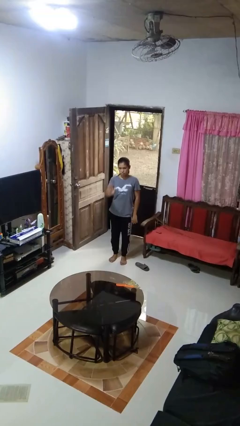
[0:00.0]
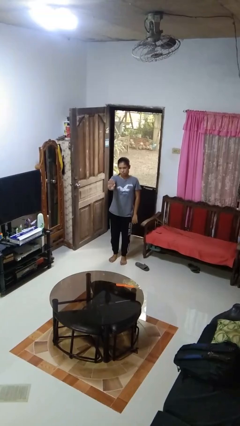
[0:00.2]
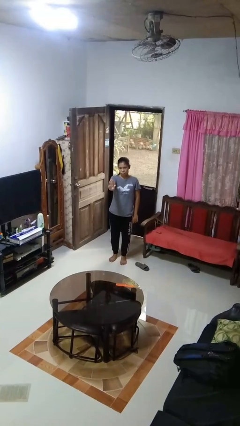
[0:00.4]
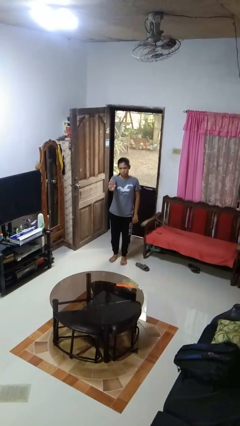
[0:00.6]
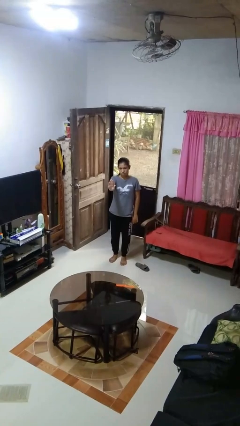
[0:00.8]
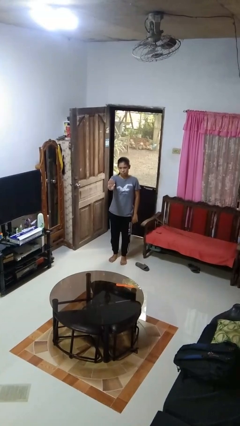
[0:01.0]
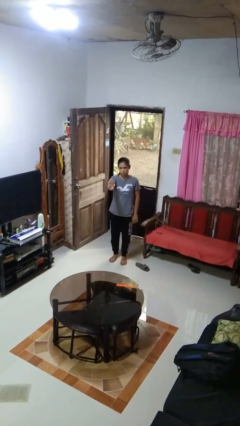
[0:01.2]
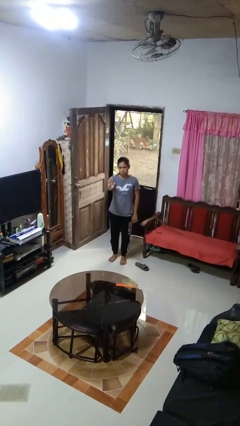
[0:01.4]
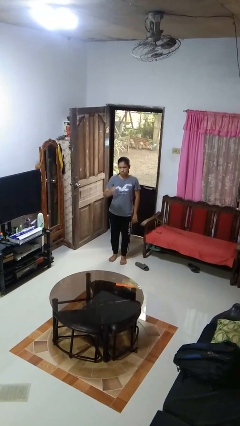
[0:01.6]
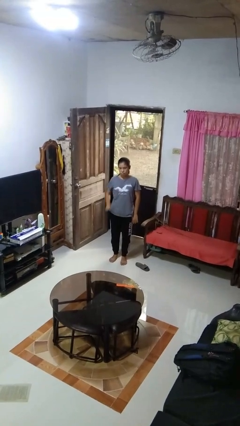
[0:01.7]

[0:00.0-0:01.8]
person gestures stop

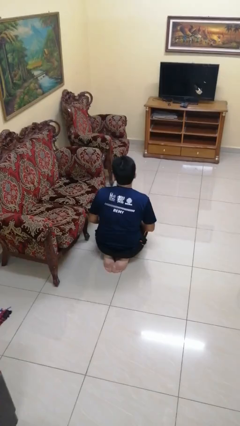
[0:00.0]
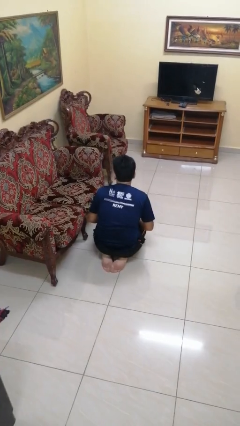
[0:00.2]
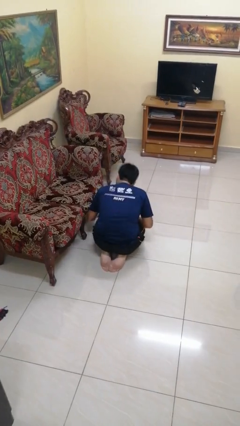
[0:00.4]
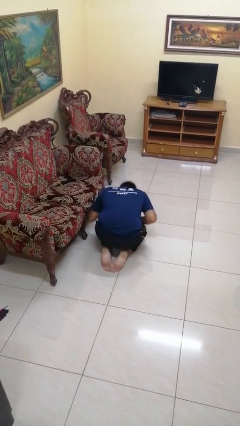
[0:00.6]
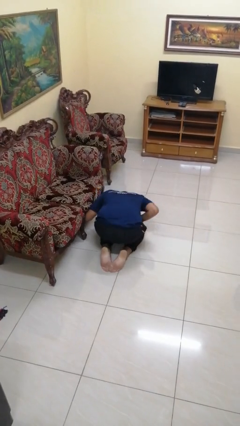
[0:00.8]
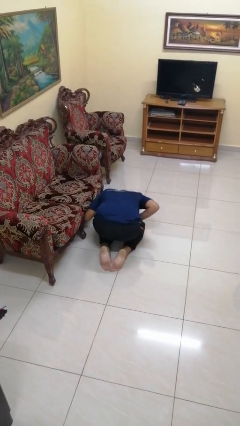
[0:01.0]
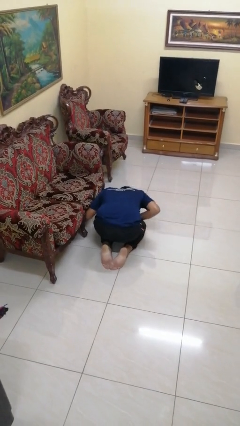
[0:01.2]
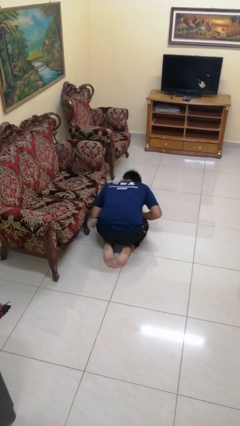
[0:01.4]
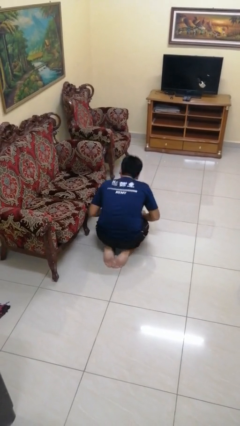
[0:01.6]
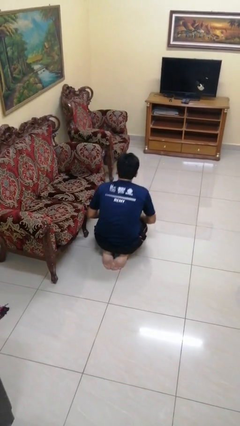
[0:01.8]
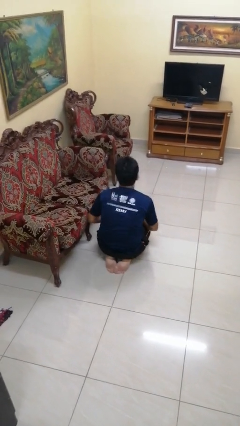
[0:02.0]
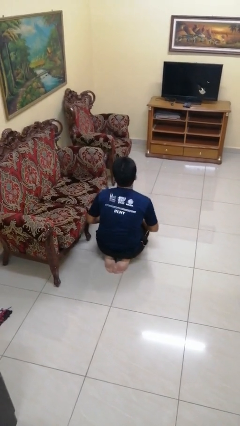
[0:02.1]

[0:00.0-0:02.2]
person searches under couch

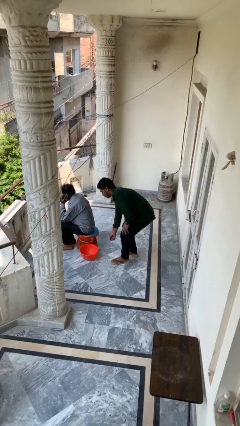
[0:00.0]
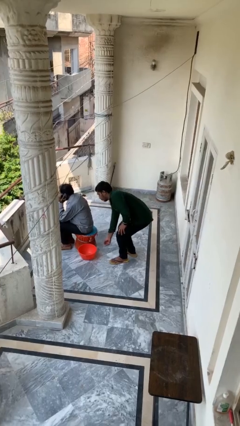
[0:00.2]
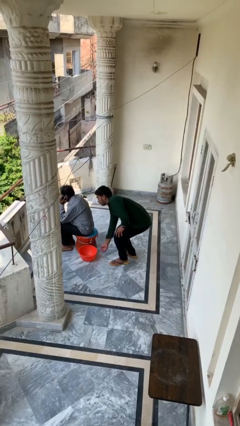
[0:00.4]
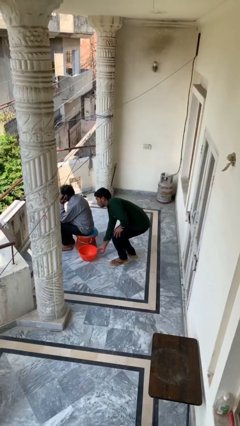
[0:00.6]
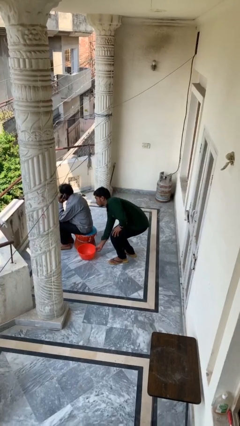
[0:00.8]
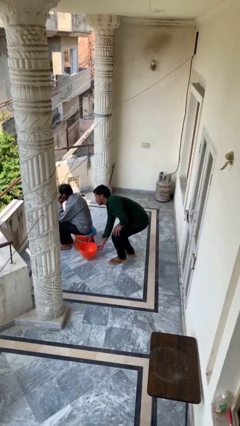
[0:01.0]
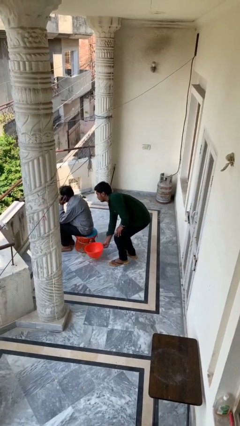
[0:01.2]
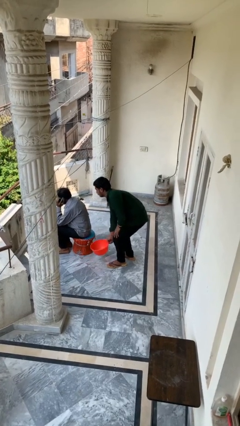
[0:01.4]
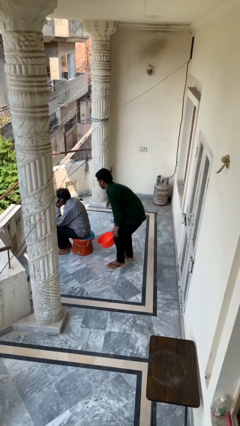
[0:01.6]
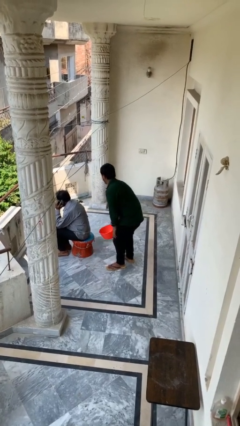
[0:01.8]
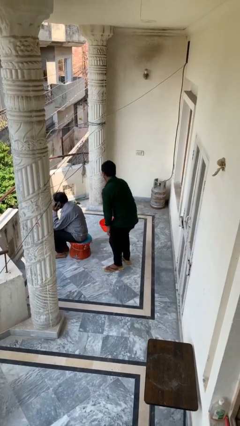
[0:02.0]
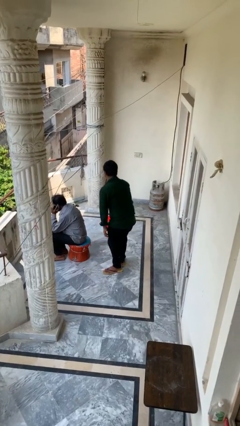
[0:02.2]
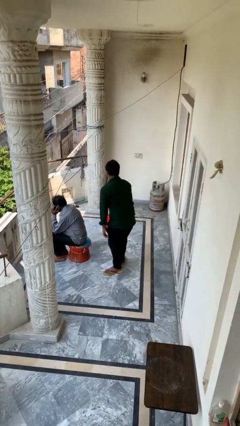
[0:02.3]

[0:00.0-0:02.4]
person steals object from person

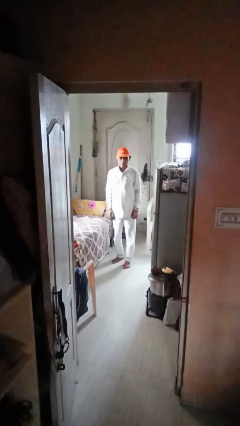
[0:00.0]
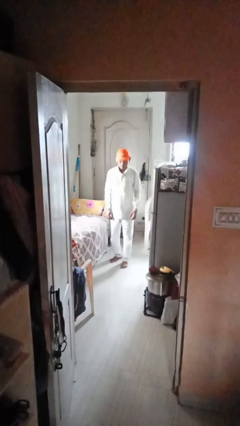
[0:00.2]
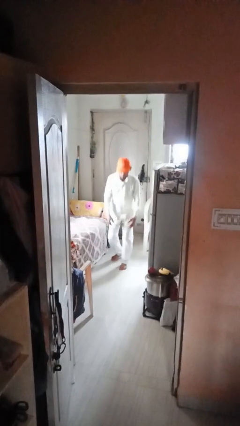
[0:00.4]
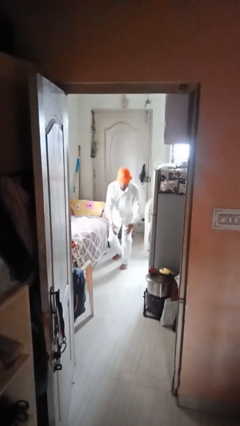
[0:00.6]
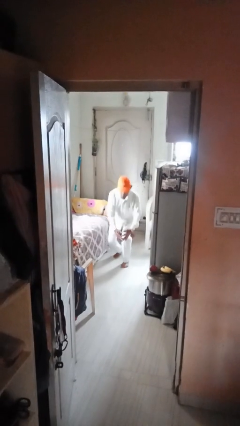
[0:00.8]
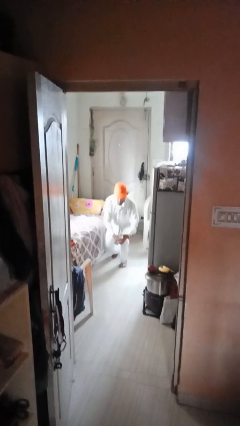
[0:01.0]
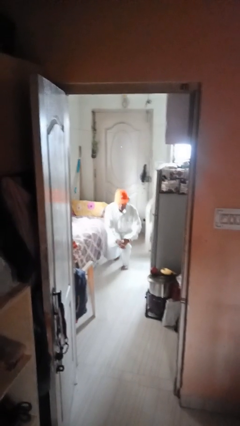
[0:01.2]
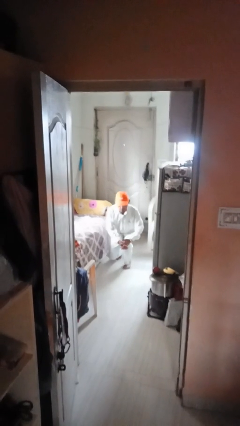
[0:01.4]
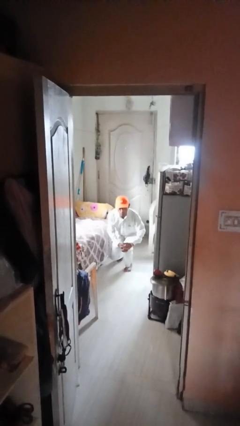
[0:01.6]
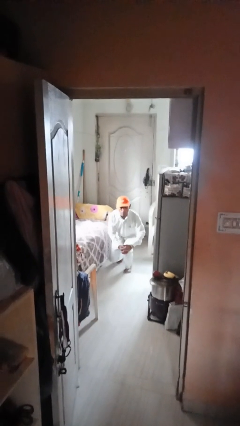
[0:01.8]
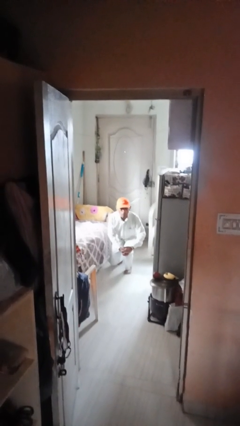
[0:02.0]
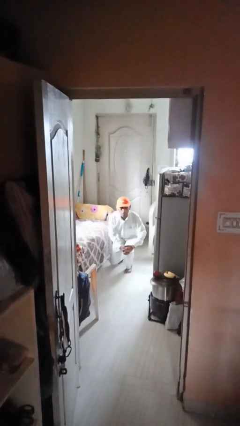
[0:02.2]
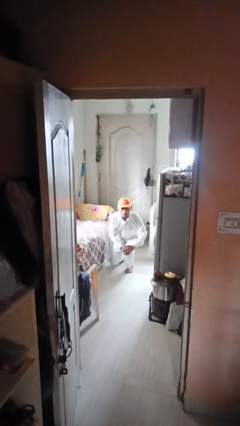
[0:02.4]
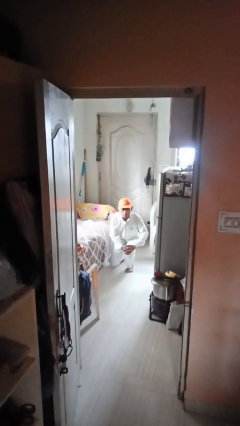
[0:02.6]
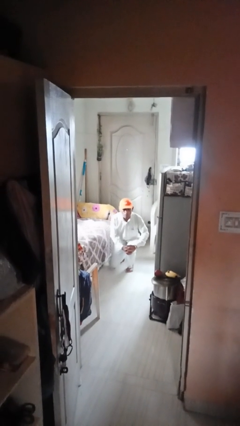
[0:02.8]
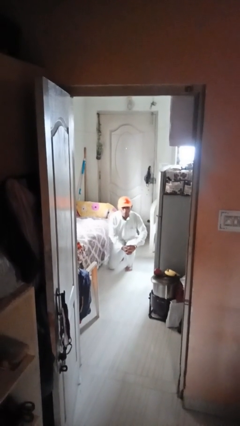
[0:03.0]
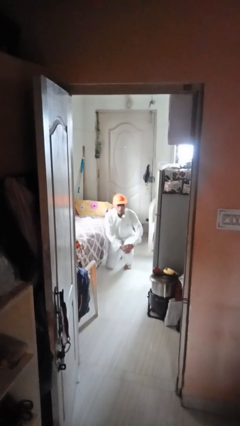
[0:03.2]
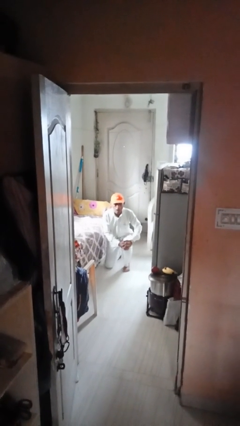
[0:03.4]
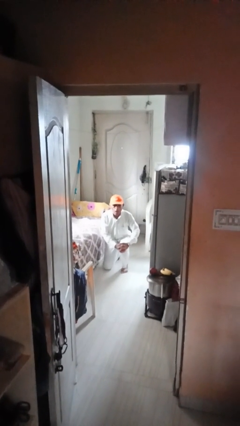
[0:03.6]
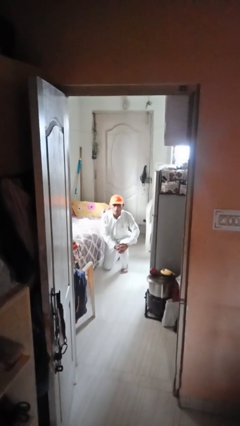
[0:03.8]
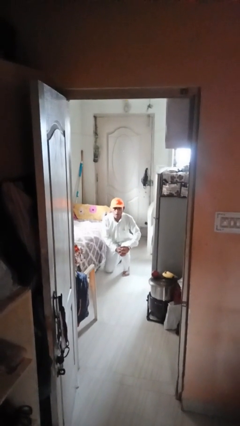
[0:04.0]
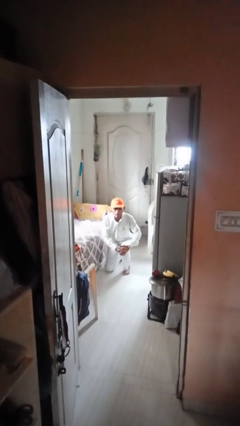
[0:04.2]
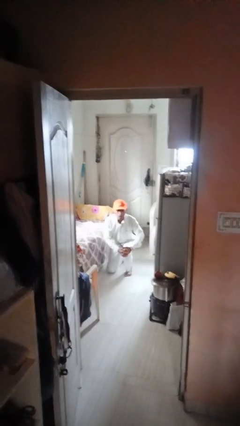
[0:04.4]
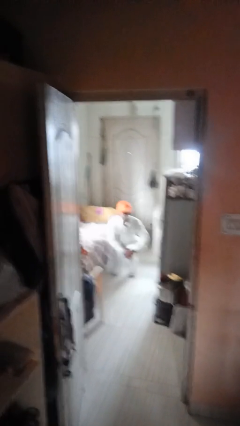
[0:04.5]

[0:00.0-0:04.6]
person exercises with lunges

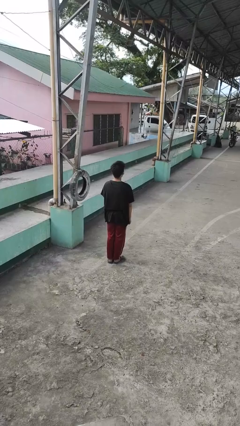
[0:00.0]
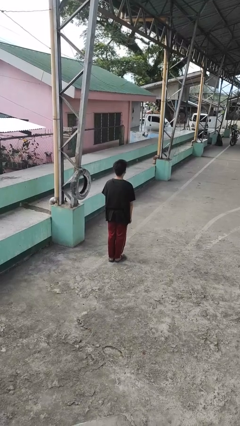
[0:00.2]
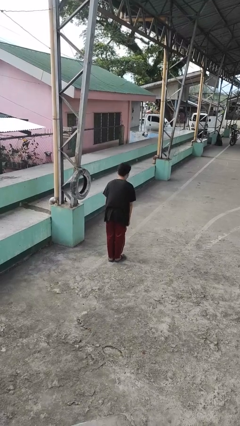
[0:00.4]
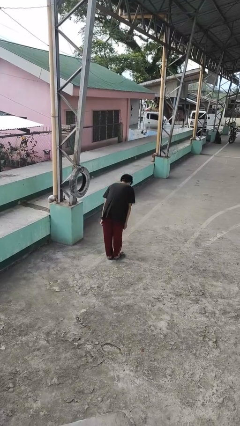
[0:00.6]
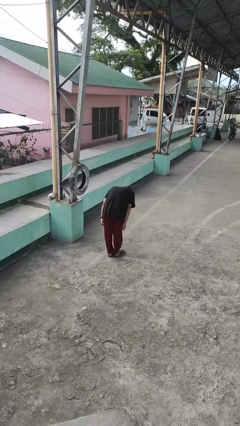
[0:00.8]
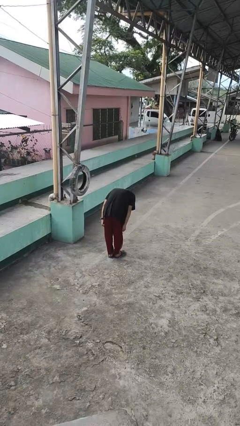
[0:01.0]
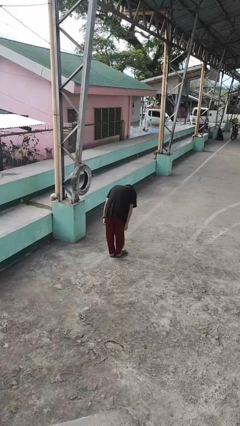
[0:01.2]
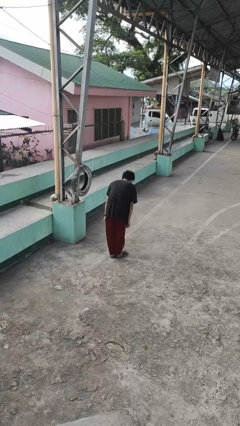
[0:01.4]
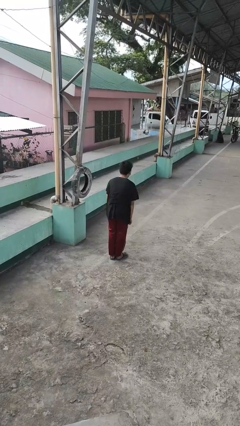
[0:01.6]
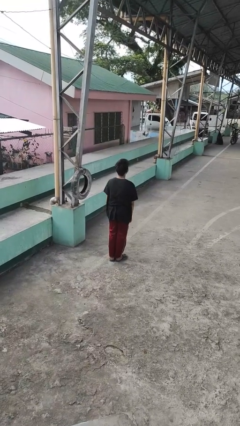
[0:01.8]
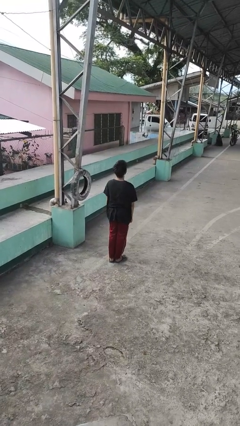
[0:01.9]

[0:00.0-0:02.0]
person bows

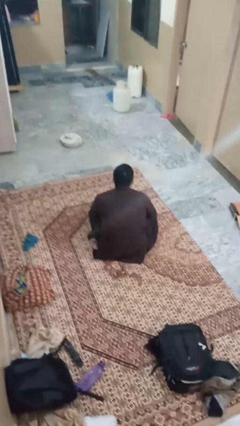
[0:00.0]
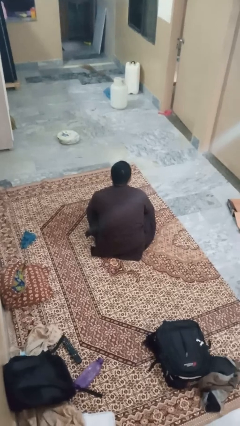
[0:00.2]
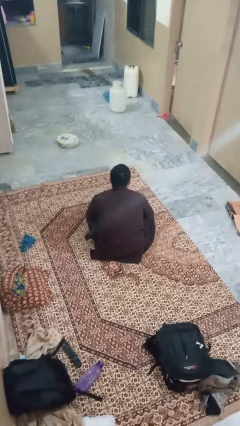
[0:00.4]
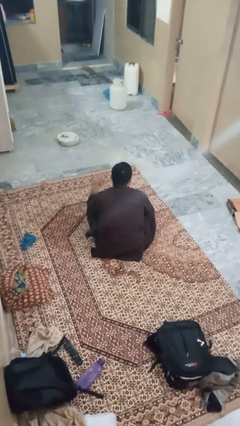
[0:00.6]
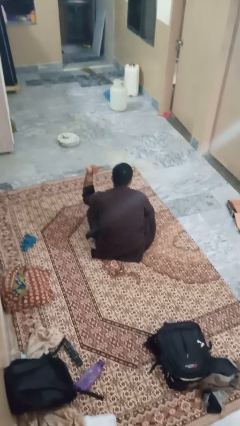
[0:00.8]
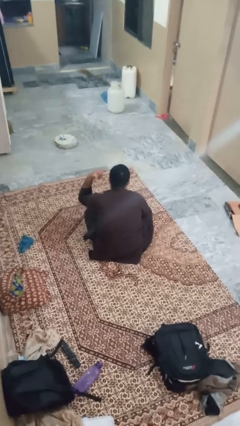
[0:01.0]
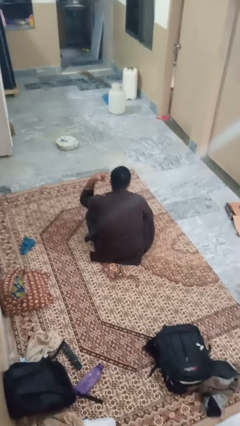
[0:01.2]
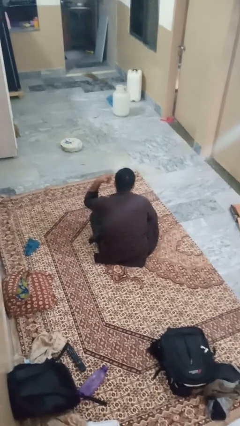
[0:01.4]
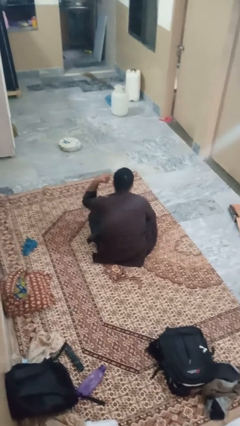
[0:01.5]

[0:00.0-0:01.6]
person gestures call me

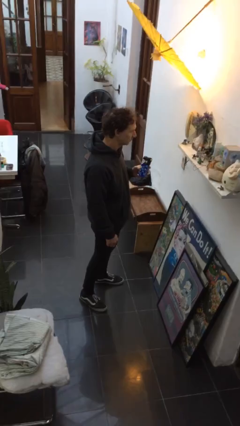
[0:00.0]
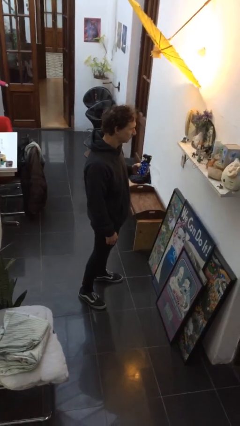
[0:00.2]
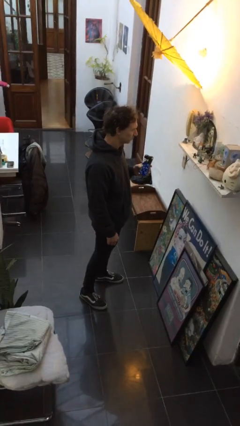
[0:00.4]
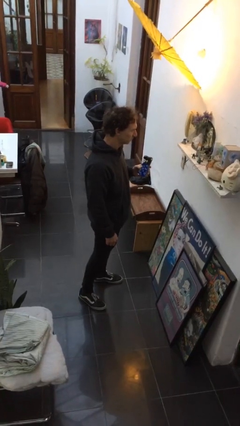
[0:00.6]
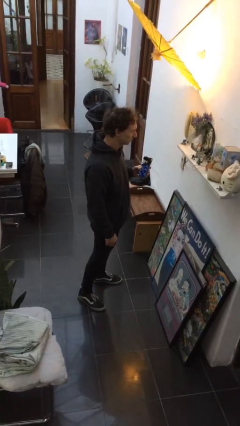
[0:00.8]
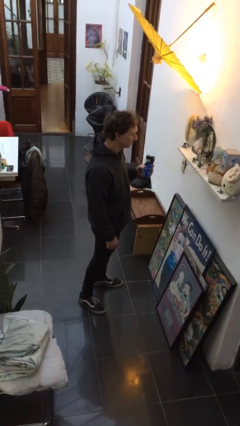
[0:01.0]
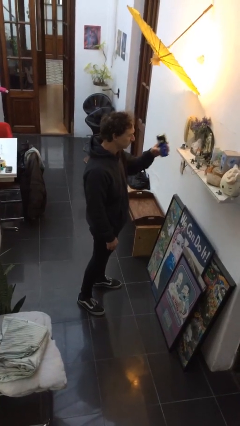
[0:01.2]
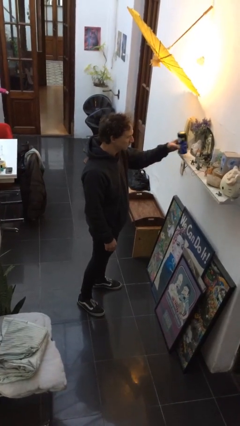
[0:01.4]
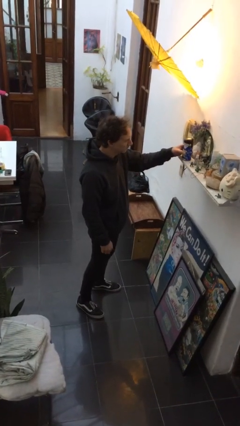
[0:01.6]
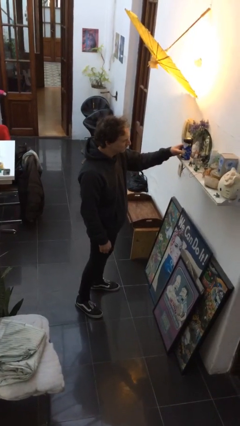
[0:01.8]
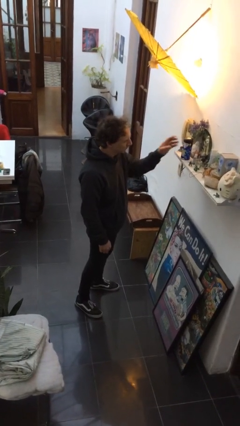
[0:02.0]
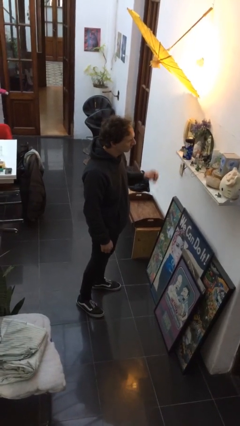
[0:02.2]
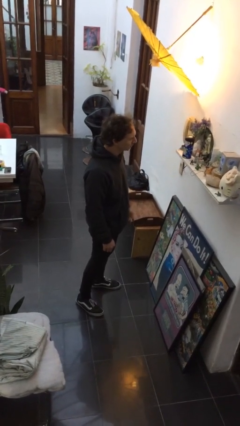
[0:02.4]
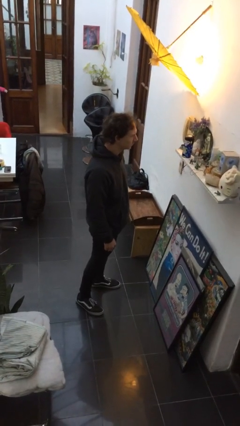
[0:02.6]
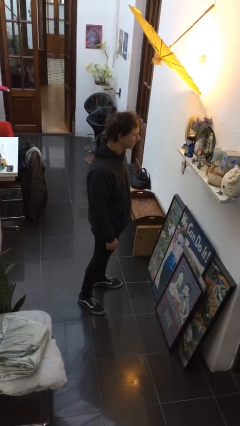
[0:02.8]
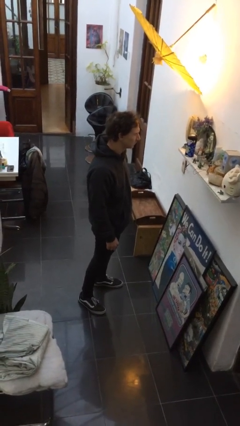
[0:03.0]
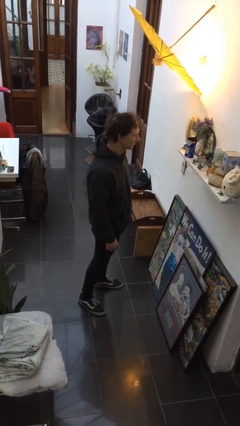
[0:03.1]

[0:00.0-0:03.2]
person puts down object on shelf
